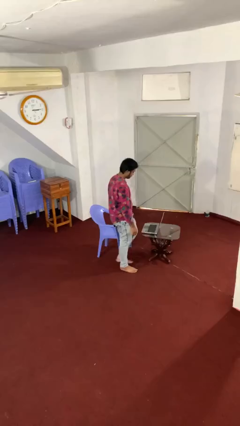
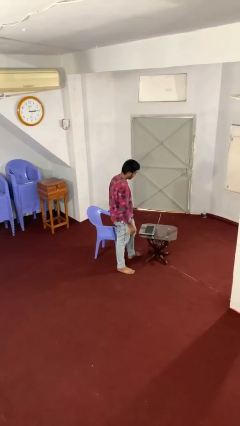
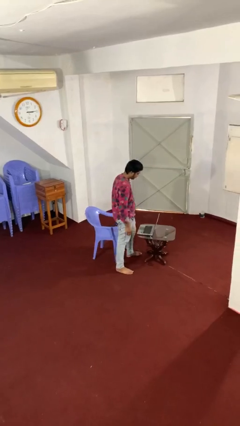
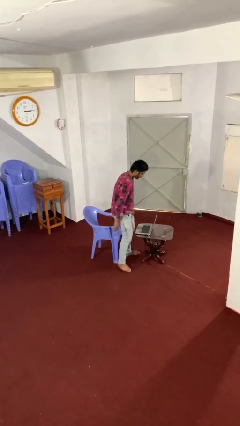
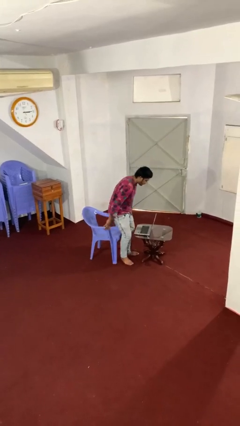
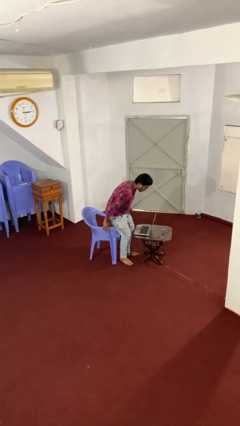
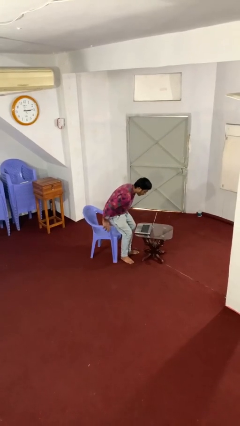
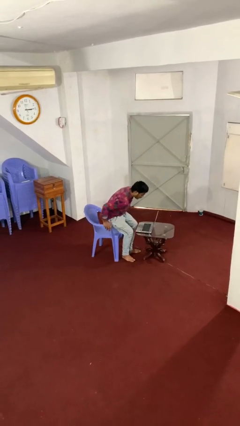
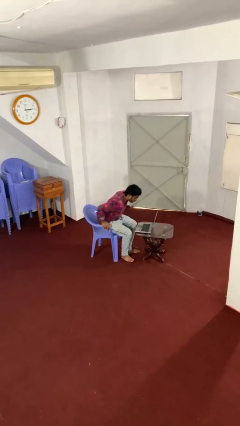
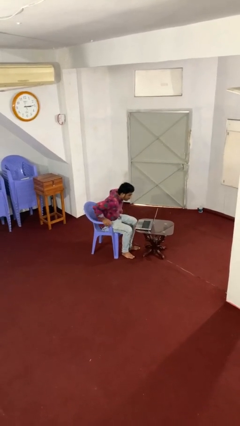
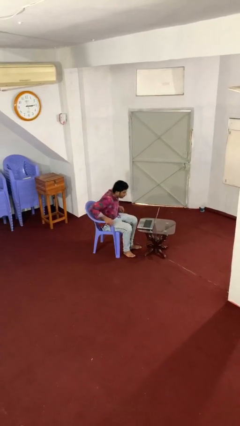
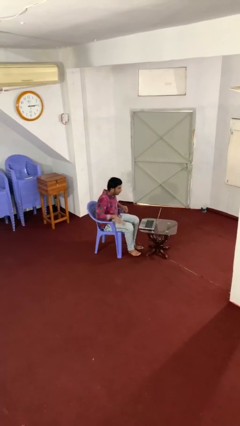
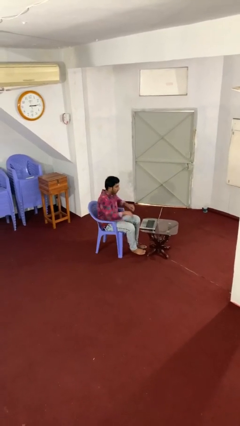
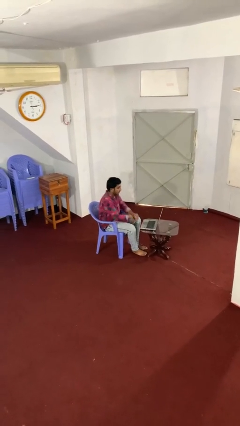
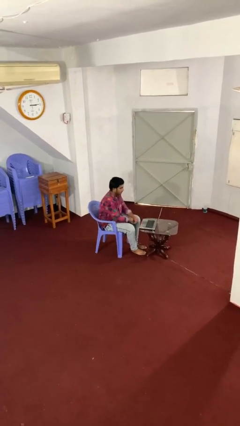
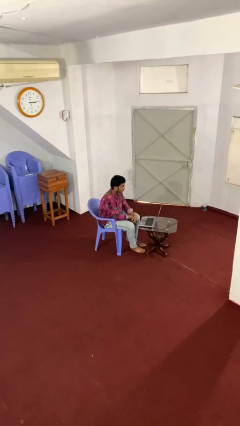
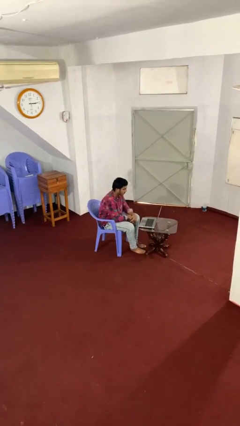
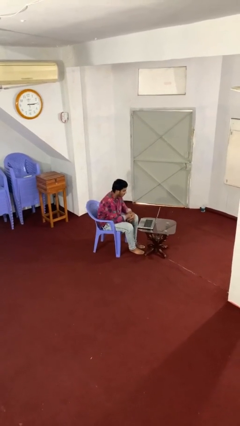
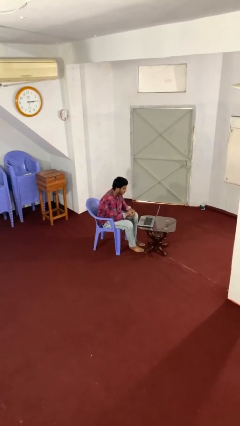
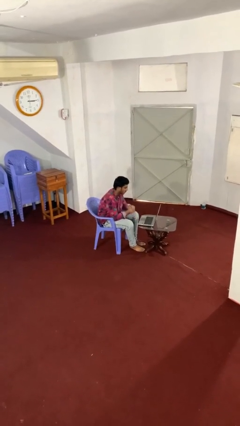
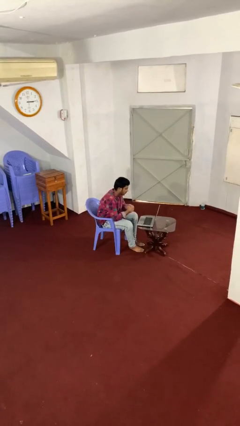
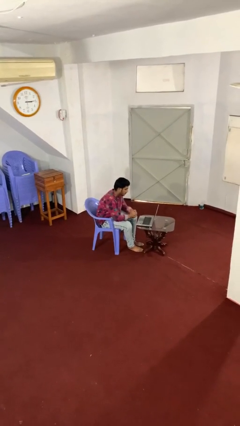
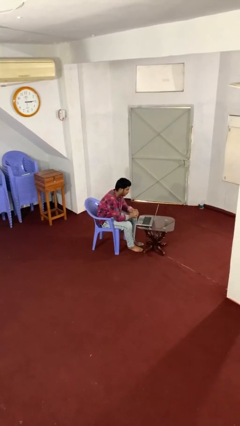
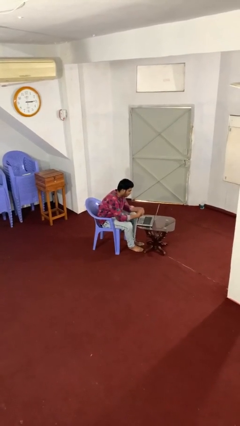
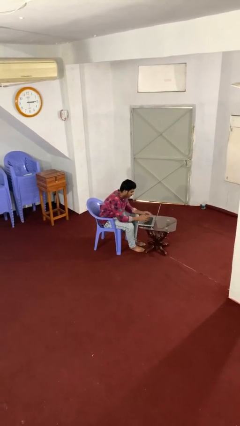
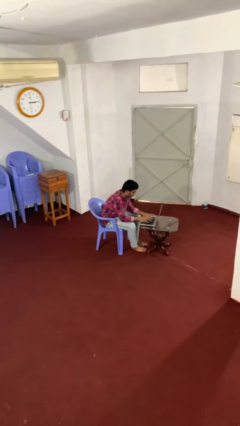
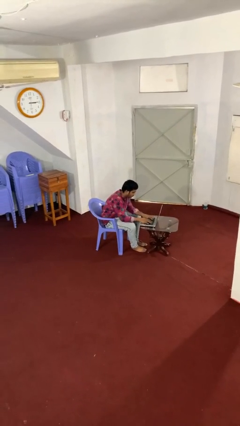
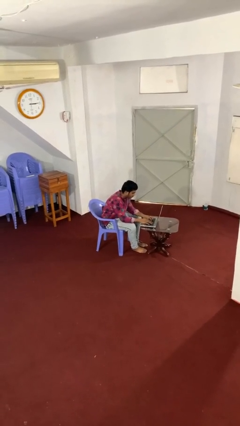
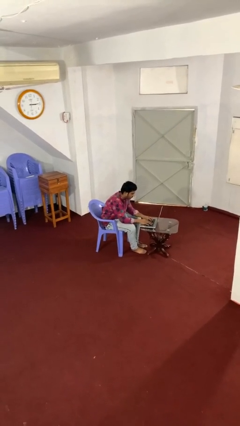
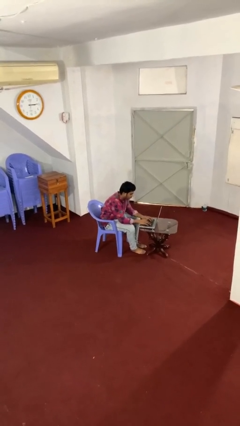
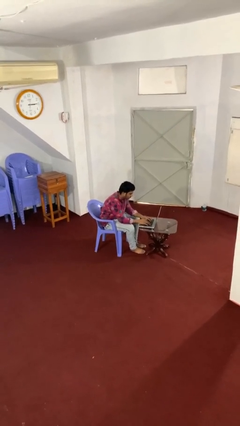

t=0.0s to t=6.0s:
person sits down

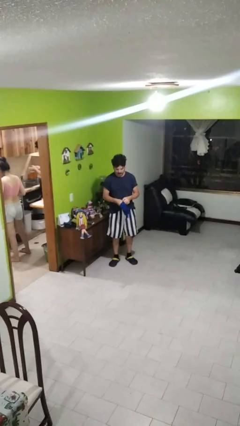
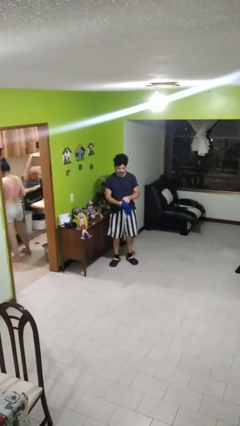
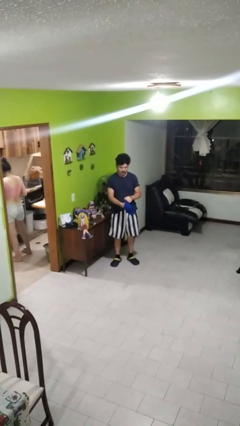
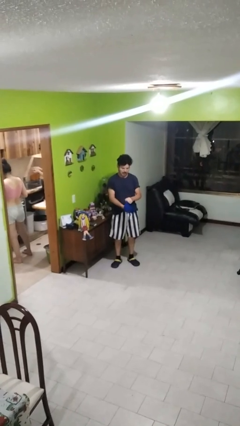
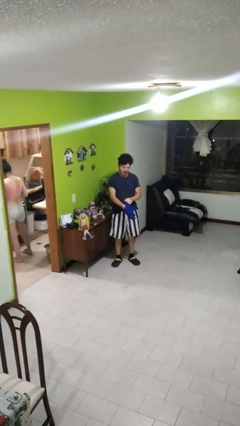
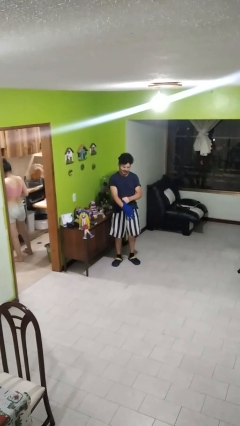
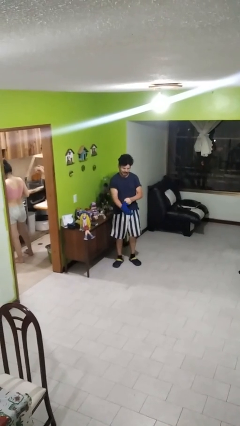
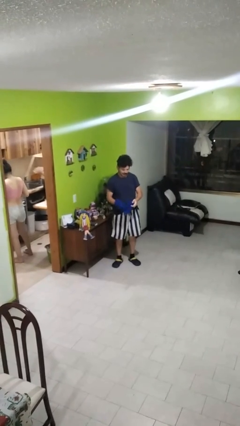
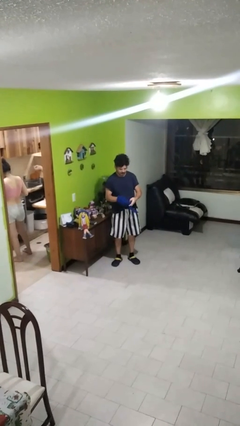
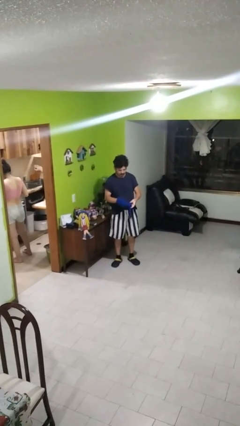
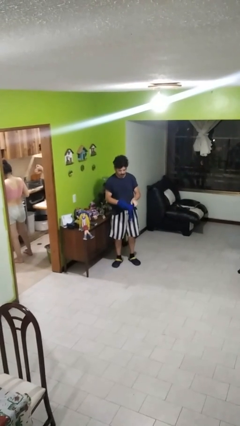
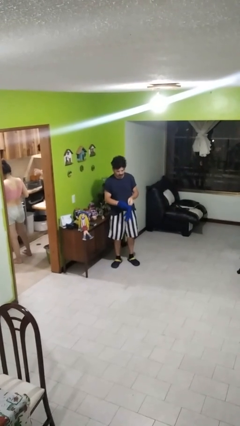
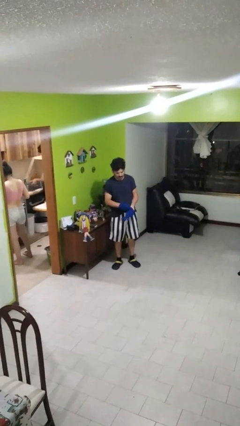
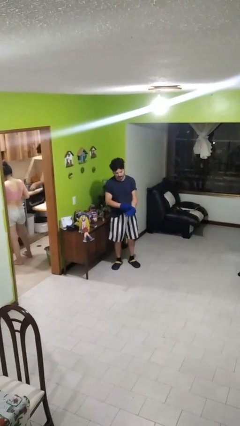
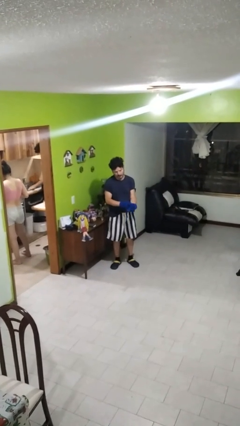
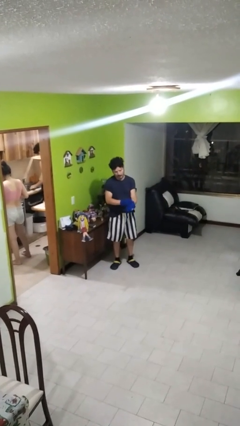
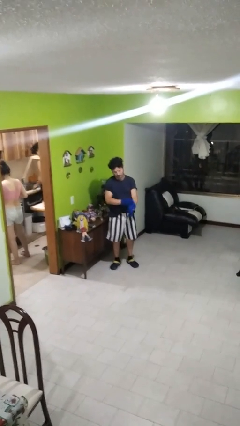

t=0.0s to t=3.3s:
person puts on gloves

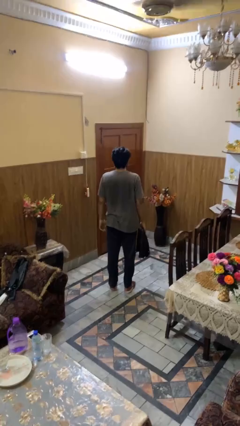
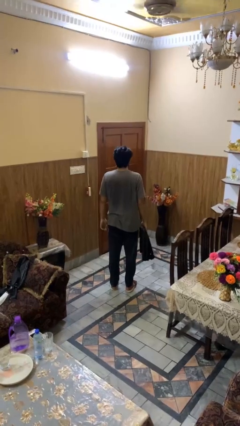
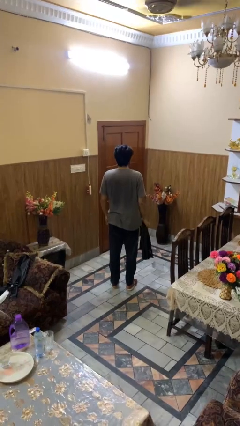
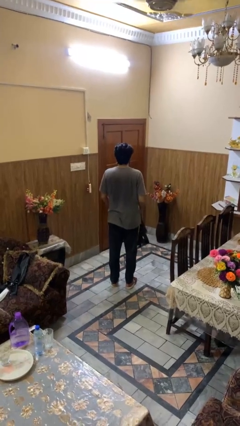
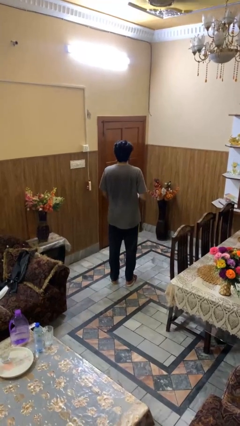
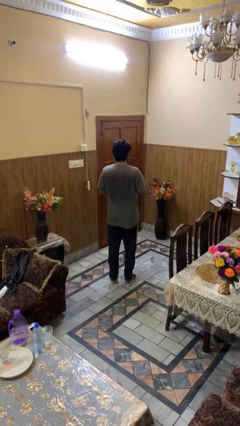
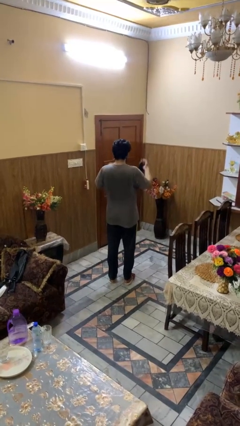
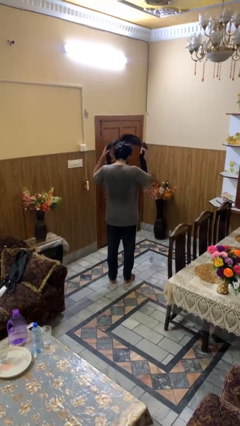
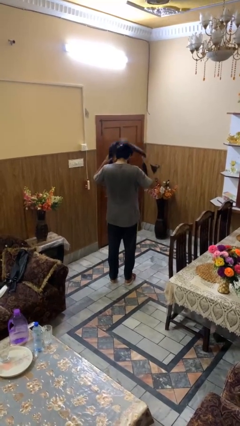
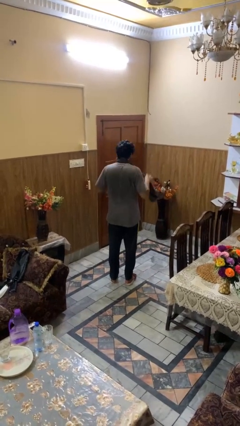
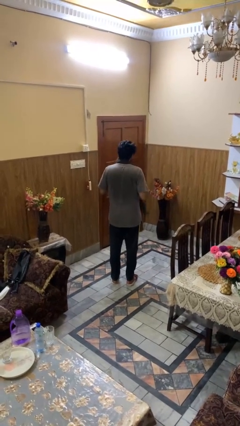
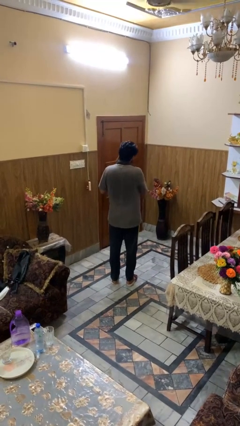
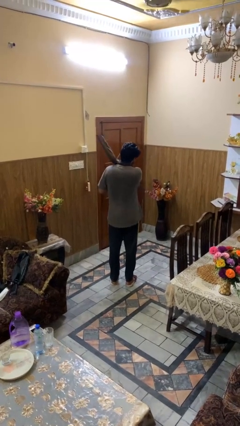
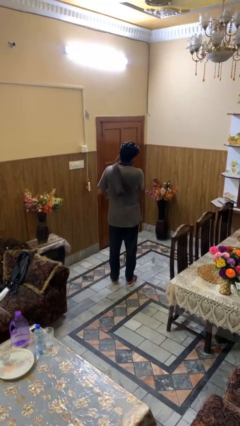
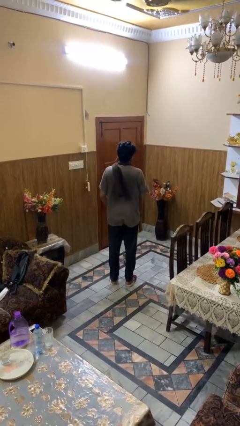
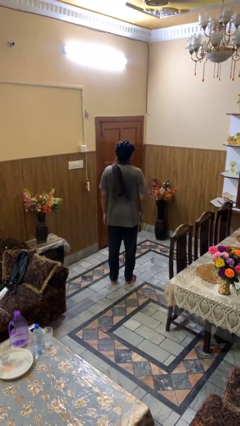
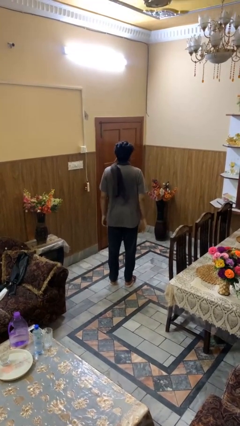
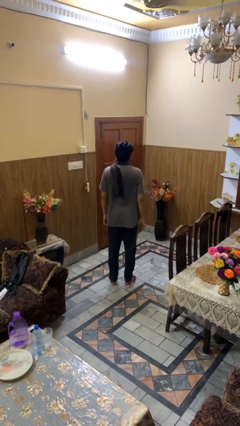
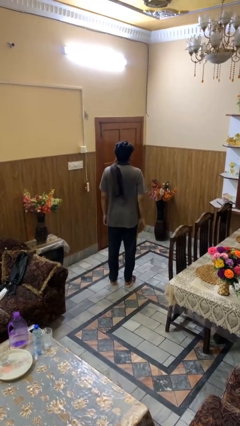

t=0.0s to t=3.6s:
person puts on scarf

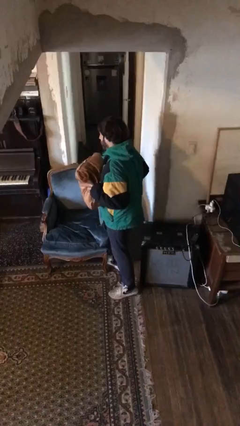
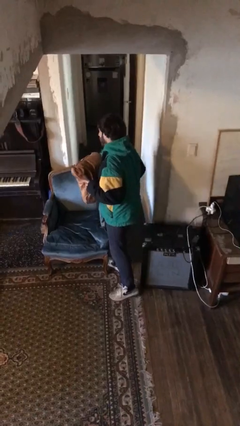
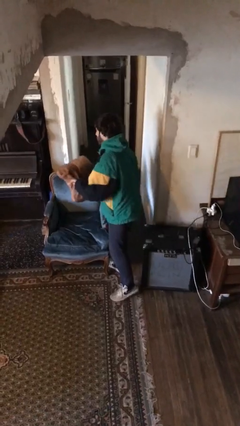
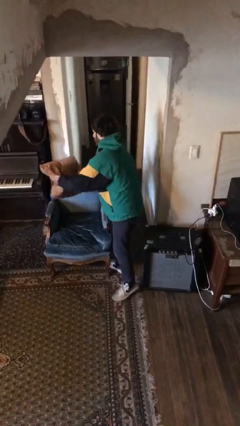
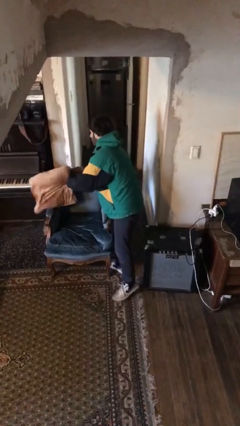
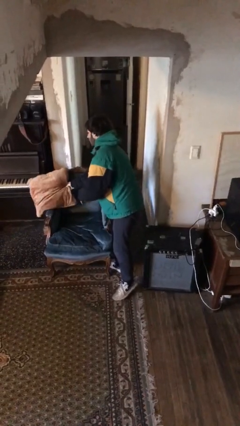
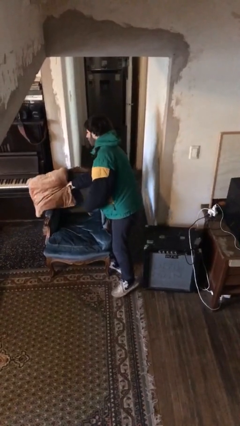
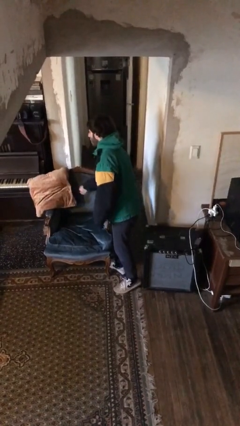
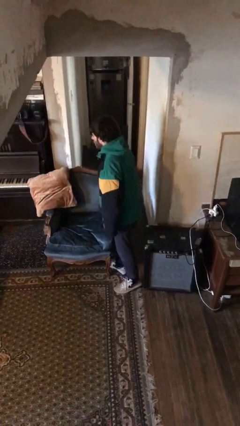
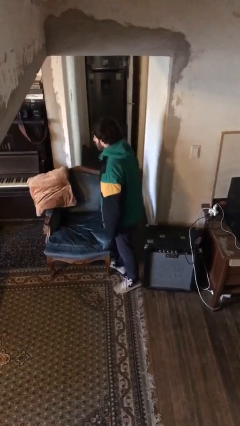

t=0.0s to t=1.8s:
person puts down object on couch

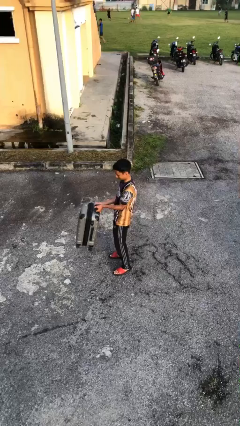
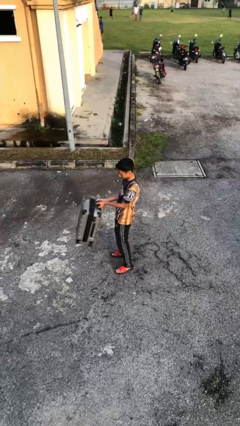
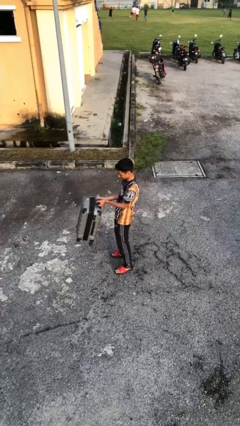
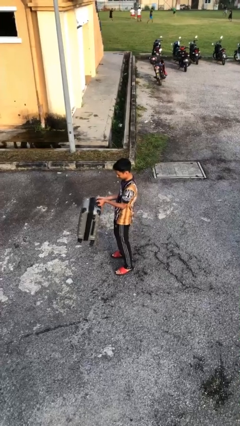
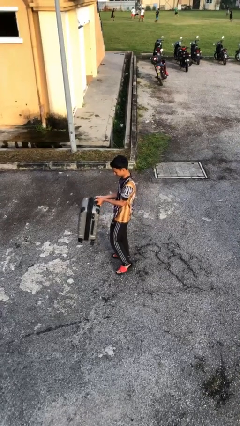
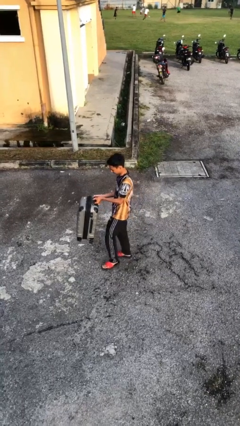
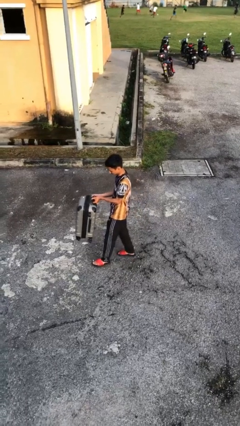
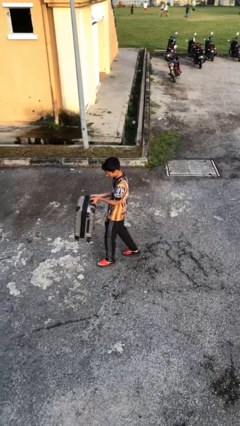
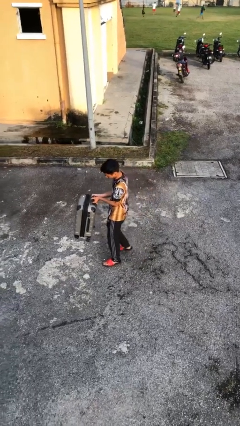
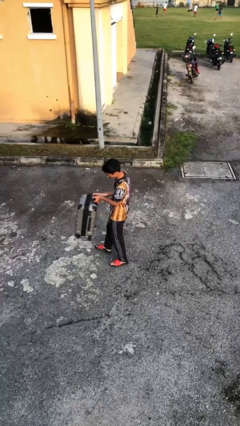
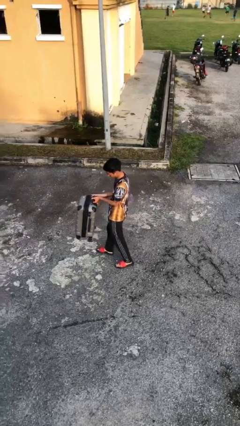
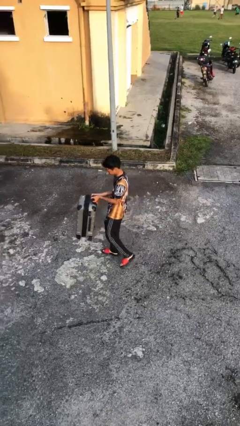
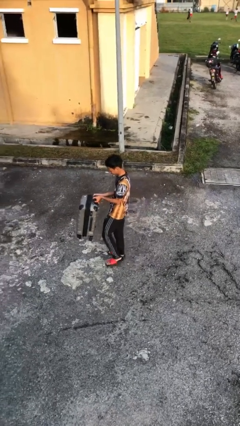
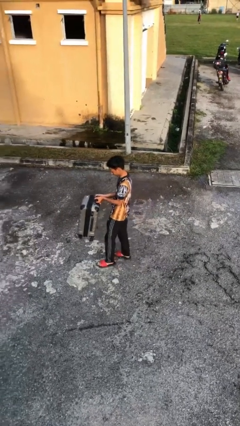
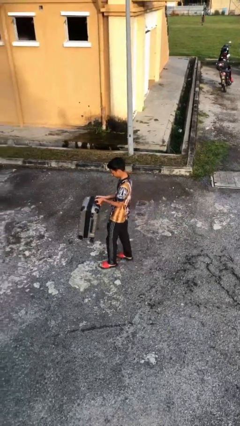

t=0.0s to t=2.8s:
person carries heavy object
